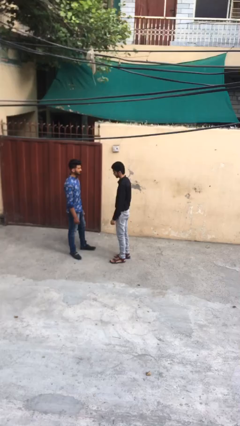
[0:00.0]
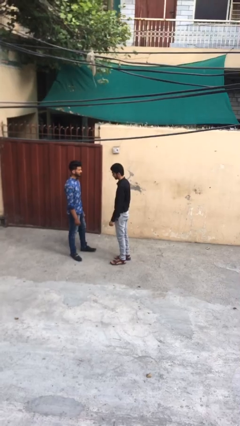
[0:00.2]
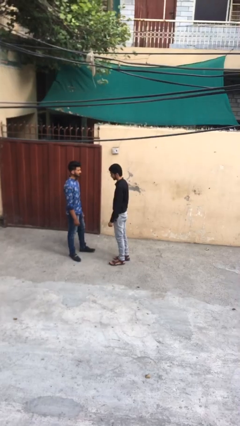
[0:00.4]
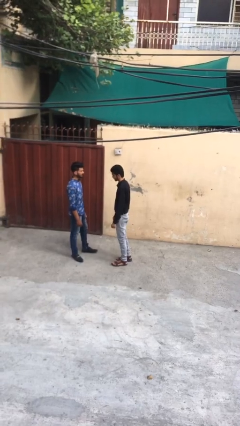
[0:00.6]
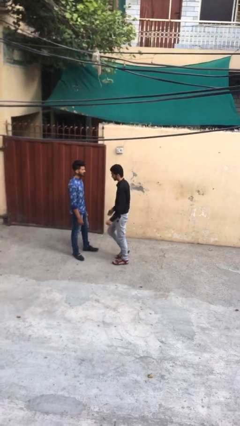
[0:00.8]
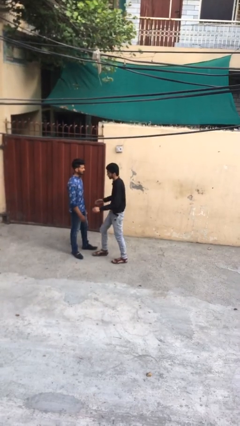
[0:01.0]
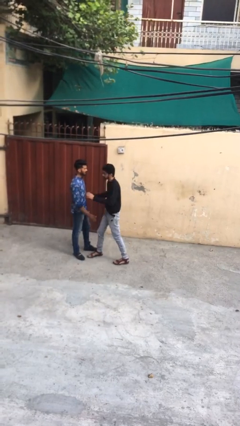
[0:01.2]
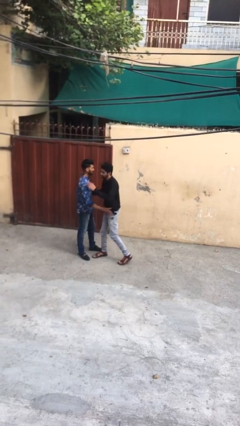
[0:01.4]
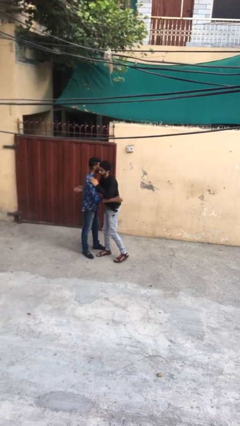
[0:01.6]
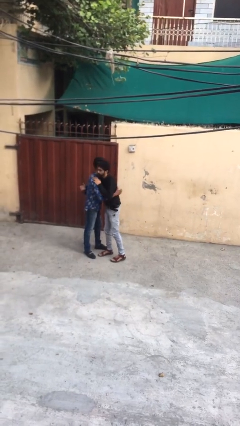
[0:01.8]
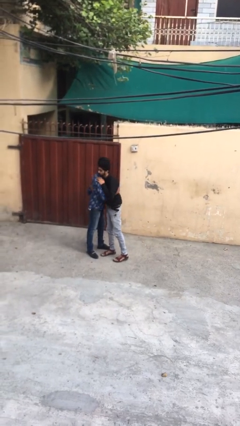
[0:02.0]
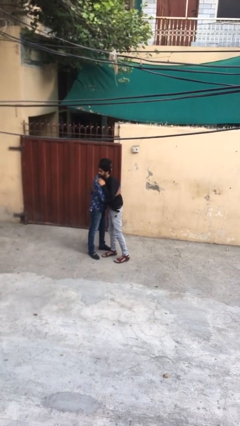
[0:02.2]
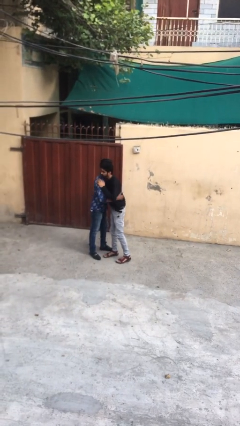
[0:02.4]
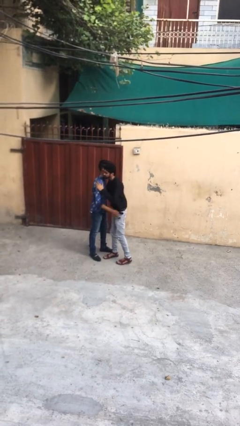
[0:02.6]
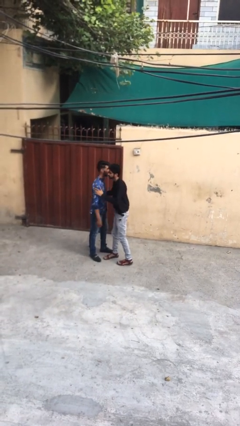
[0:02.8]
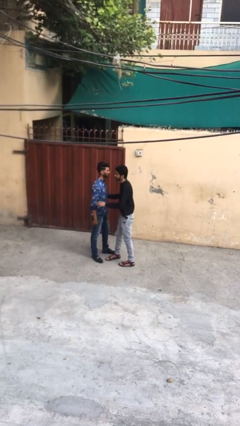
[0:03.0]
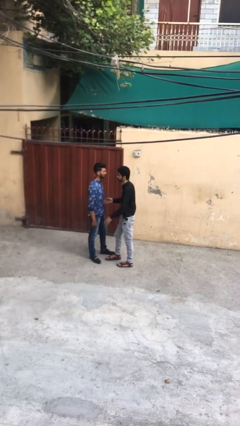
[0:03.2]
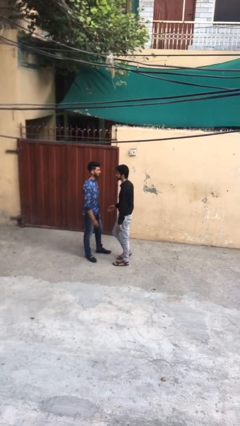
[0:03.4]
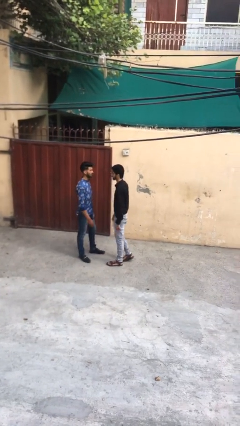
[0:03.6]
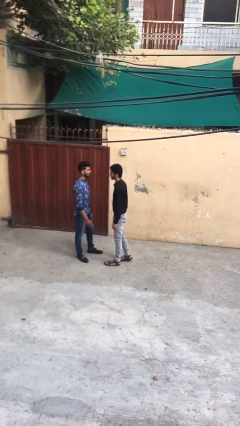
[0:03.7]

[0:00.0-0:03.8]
person embraces person

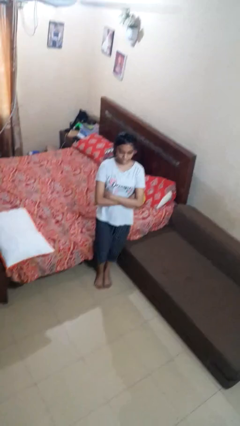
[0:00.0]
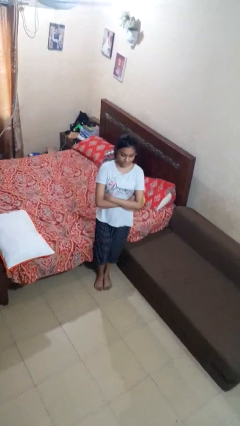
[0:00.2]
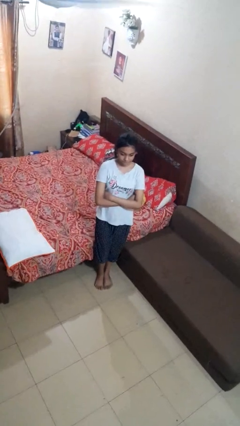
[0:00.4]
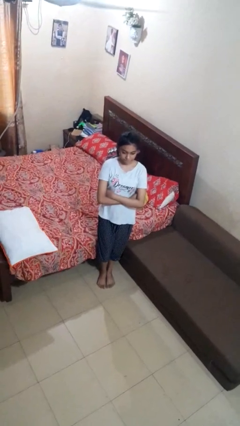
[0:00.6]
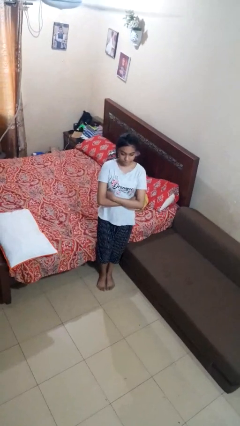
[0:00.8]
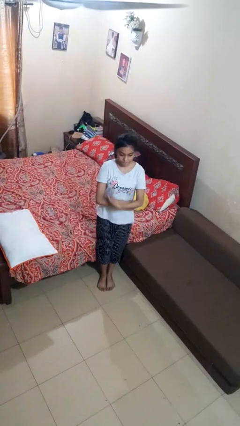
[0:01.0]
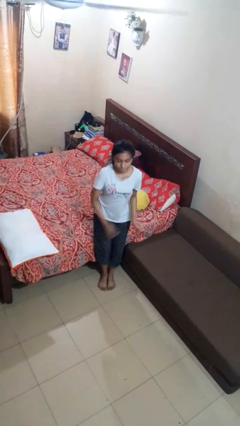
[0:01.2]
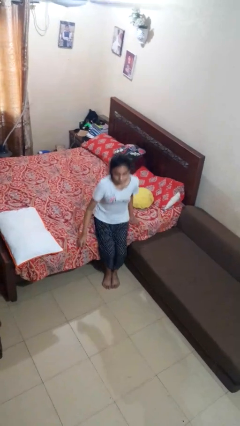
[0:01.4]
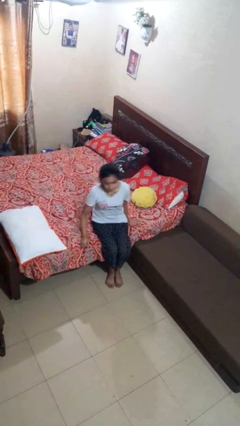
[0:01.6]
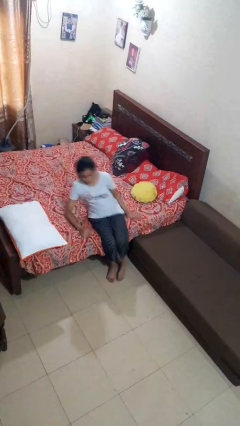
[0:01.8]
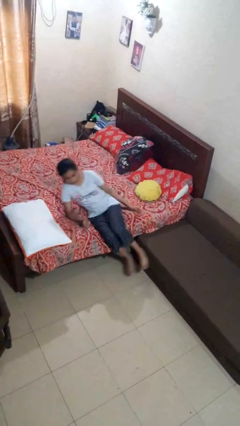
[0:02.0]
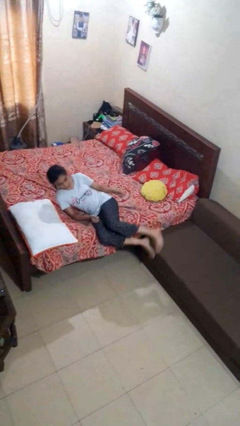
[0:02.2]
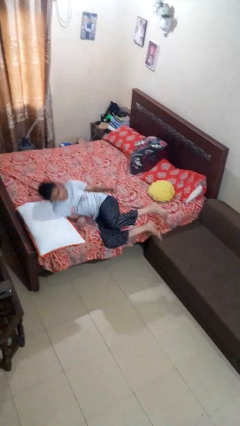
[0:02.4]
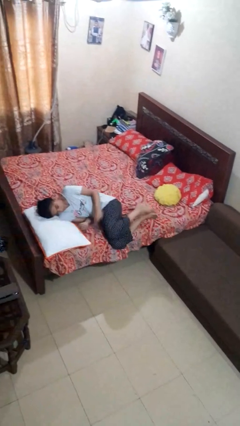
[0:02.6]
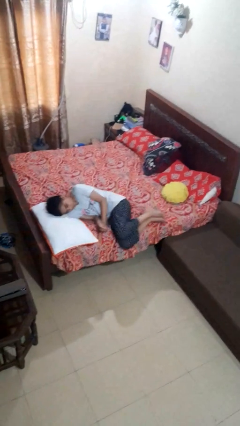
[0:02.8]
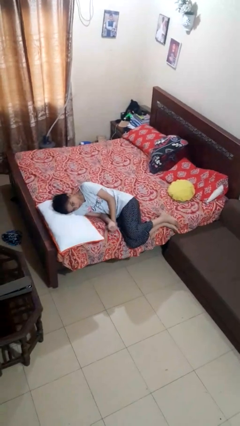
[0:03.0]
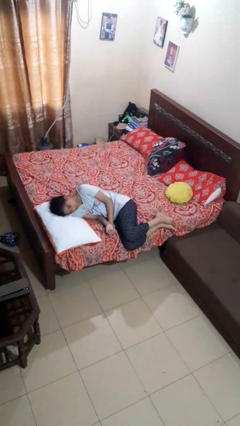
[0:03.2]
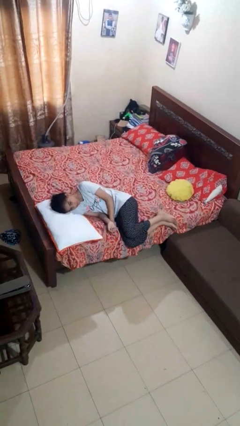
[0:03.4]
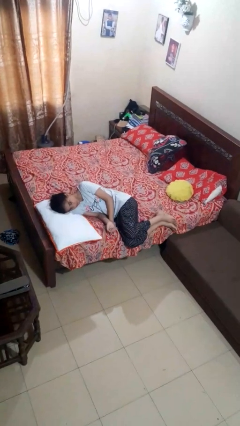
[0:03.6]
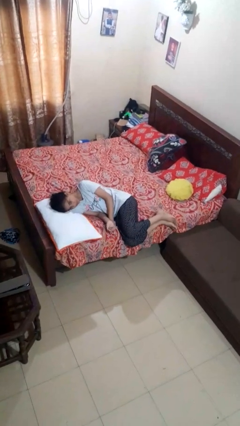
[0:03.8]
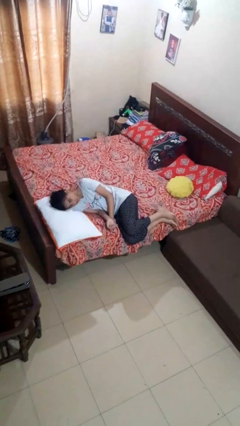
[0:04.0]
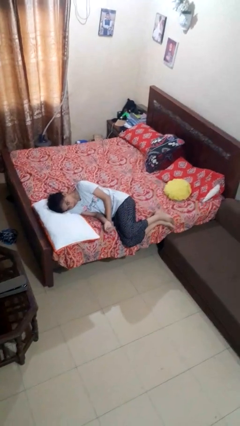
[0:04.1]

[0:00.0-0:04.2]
person lies down on bed

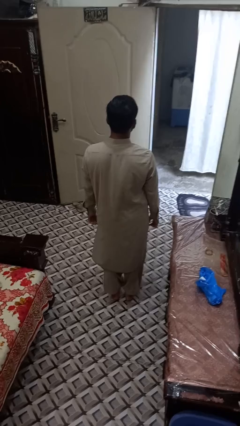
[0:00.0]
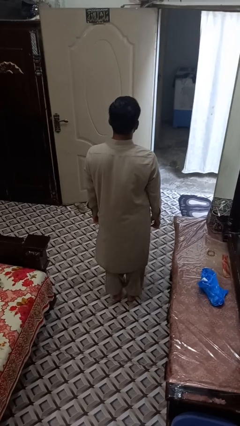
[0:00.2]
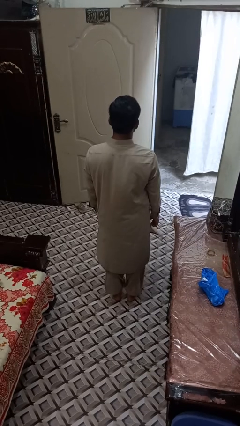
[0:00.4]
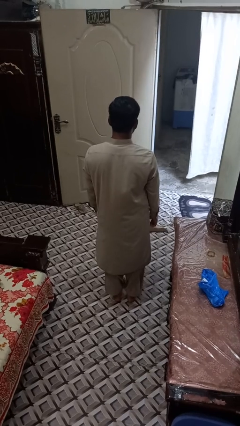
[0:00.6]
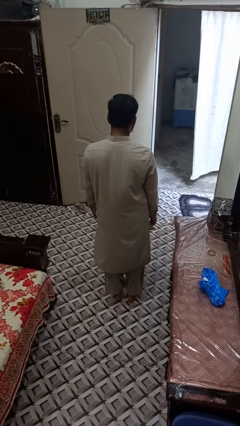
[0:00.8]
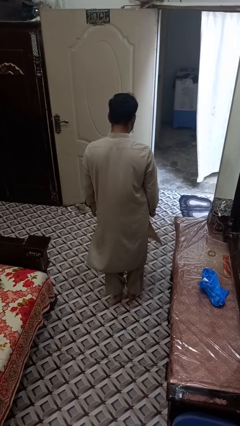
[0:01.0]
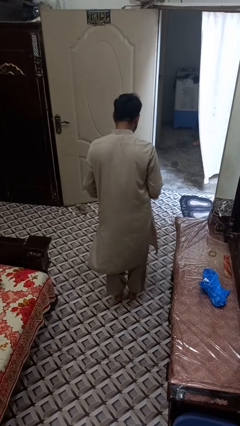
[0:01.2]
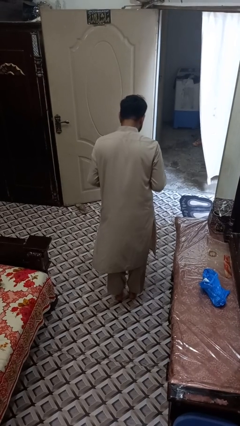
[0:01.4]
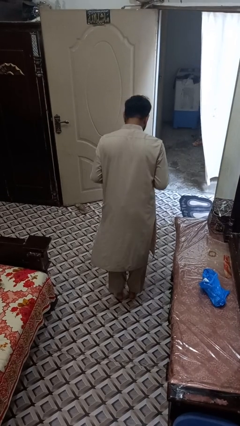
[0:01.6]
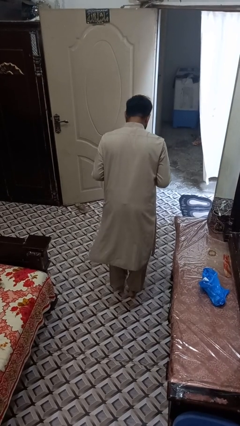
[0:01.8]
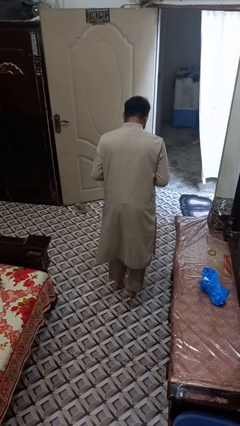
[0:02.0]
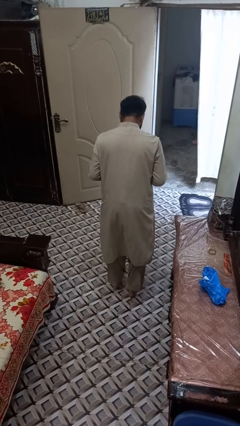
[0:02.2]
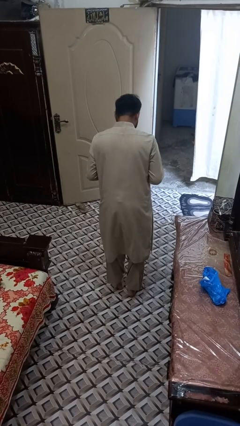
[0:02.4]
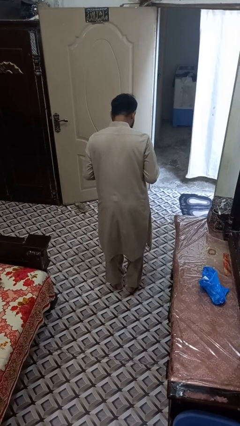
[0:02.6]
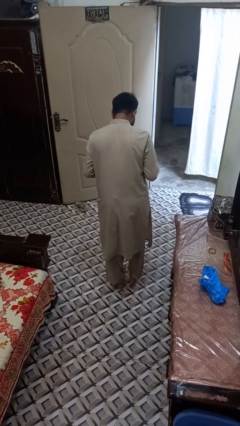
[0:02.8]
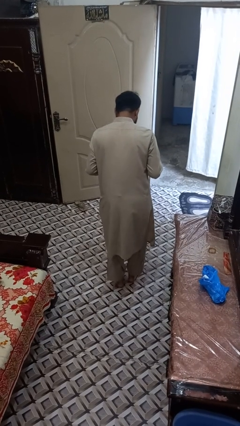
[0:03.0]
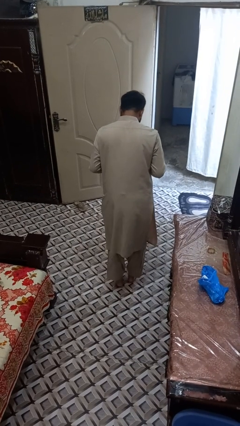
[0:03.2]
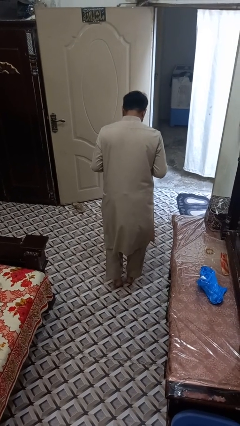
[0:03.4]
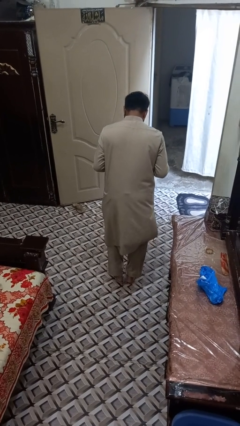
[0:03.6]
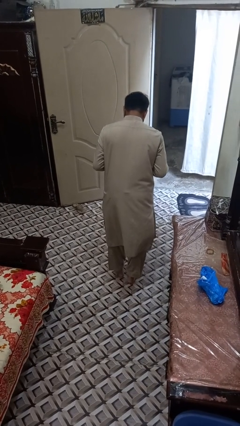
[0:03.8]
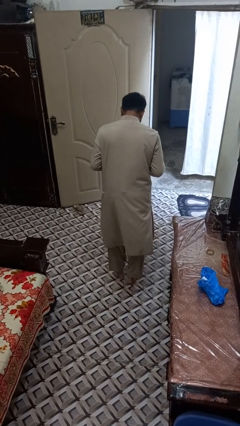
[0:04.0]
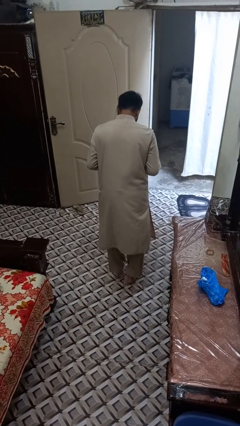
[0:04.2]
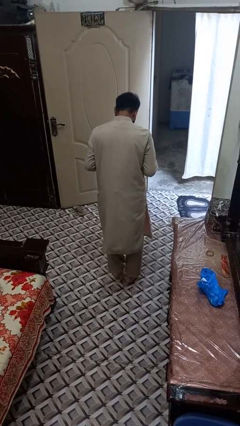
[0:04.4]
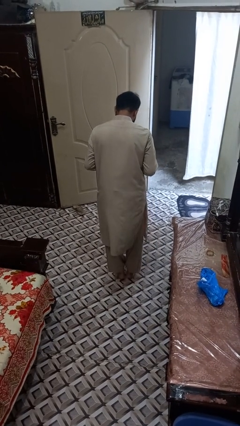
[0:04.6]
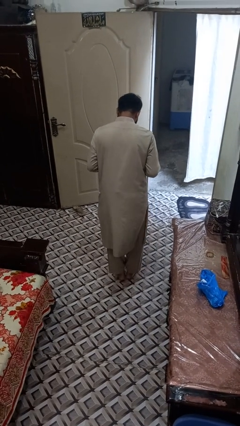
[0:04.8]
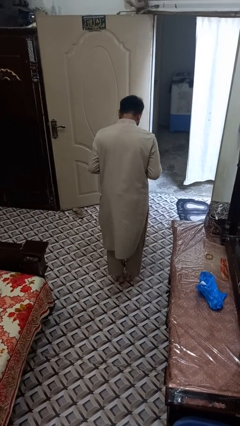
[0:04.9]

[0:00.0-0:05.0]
person walks tiptoe

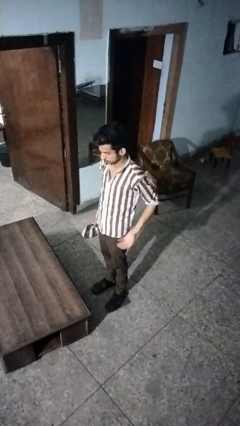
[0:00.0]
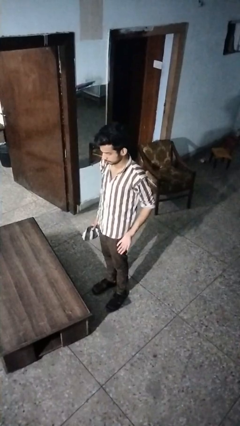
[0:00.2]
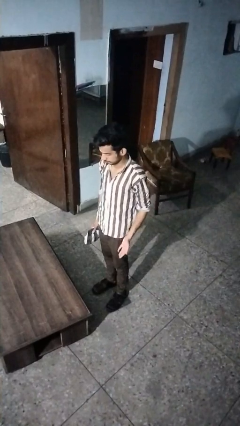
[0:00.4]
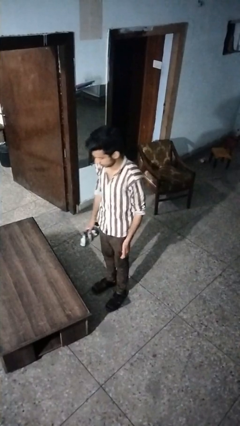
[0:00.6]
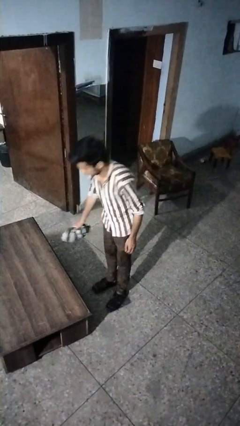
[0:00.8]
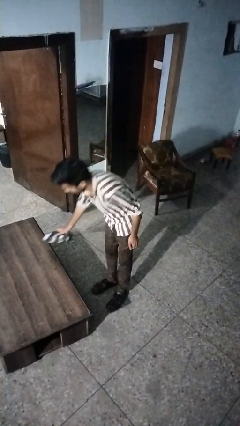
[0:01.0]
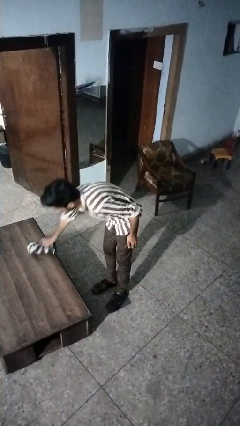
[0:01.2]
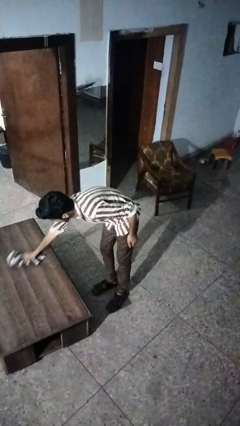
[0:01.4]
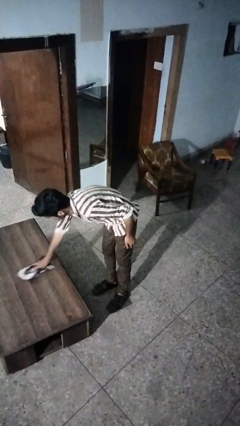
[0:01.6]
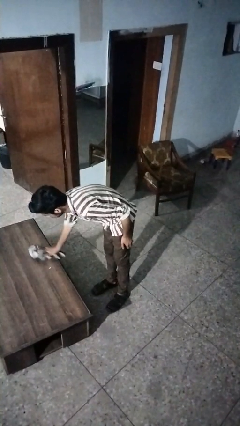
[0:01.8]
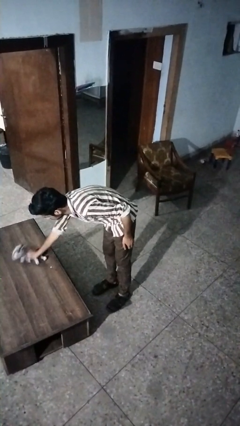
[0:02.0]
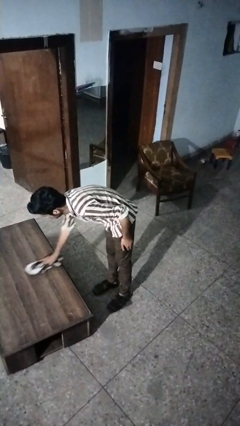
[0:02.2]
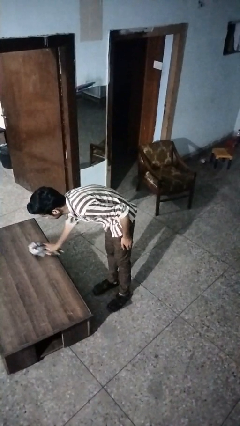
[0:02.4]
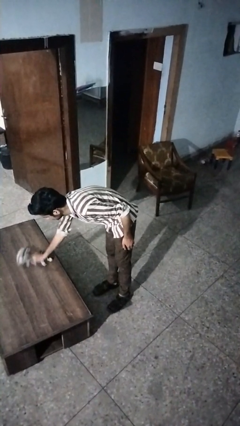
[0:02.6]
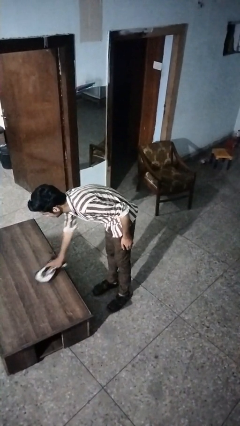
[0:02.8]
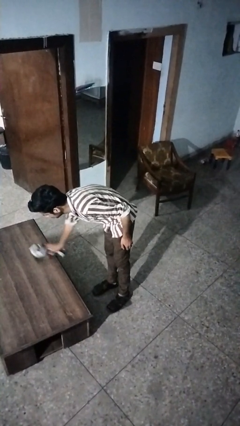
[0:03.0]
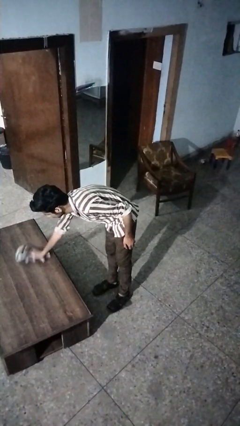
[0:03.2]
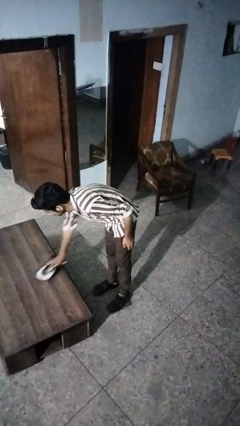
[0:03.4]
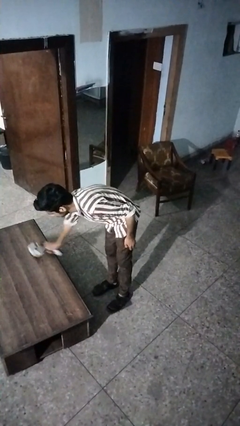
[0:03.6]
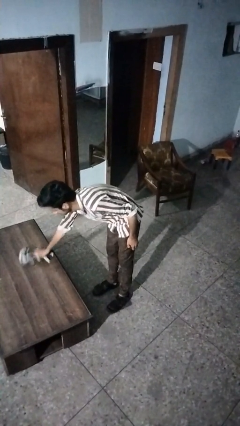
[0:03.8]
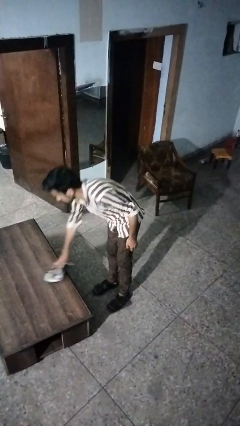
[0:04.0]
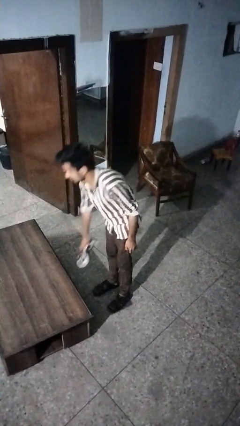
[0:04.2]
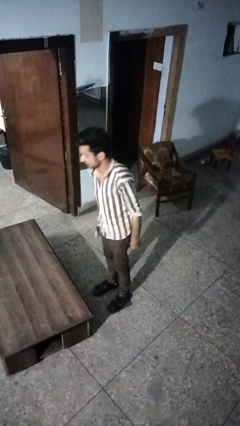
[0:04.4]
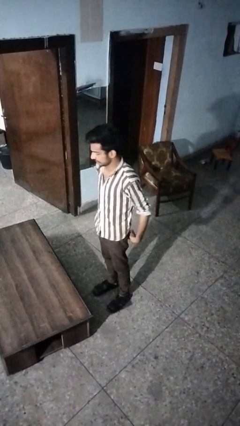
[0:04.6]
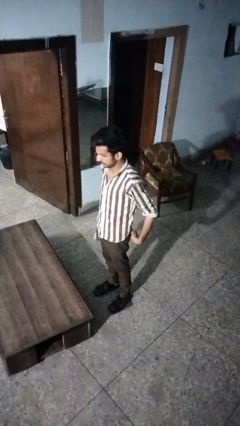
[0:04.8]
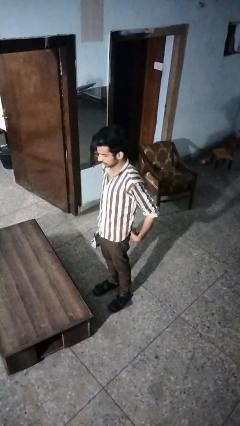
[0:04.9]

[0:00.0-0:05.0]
person cleans table with rag
